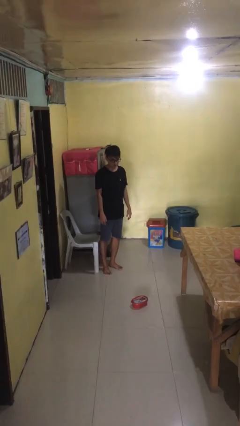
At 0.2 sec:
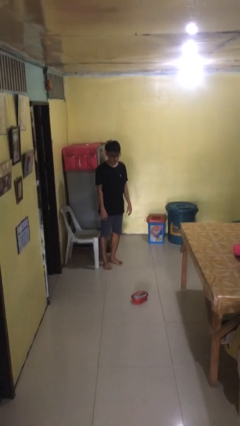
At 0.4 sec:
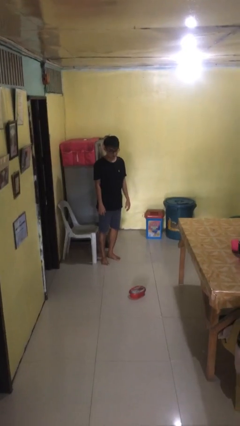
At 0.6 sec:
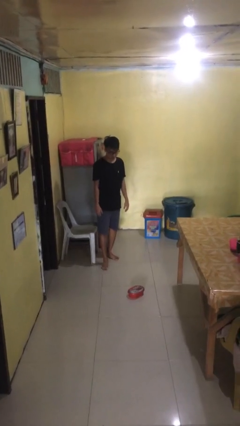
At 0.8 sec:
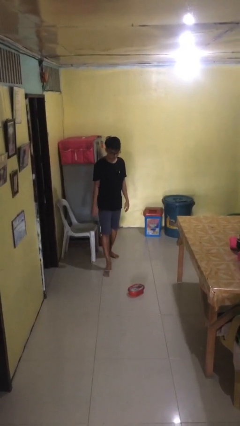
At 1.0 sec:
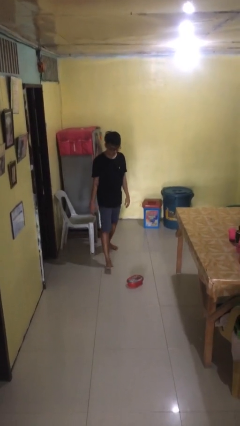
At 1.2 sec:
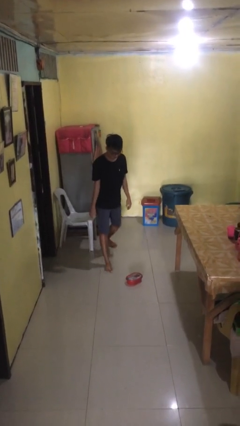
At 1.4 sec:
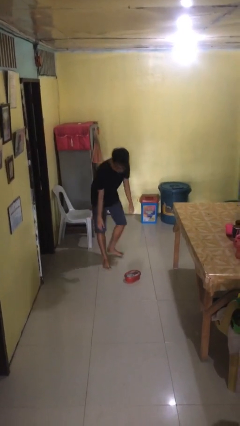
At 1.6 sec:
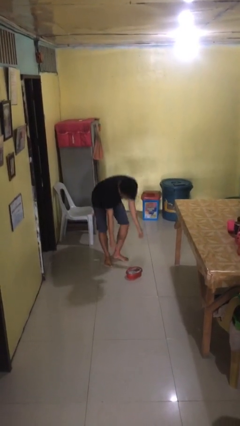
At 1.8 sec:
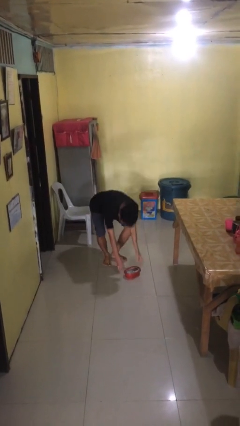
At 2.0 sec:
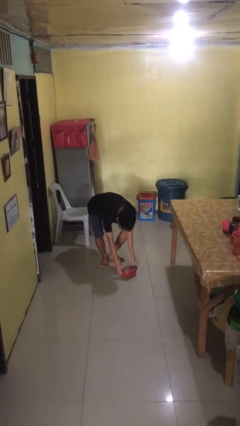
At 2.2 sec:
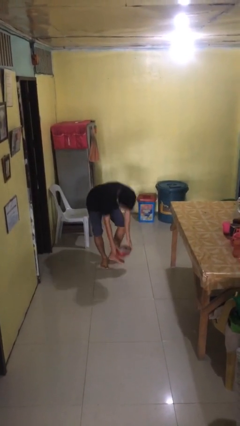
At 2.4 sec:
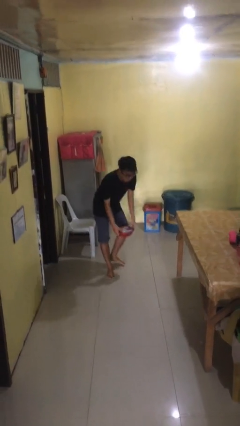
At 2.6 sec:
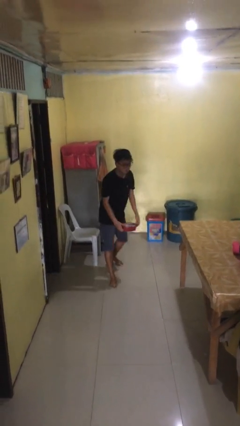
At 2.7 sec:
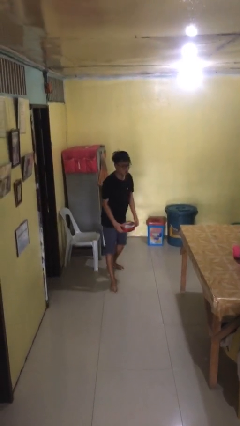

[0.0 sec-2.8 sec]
person picks up object from floor

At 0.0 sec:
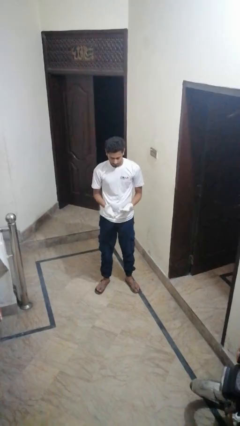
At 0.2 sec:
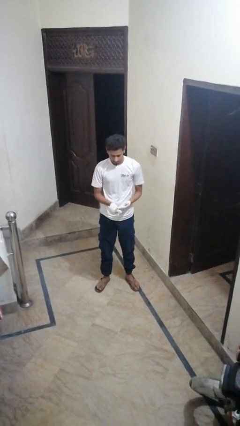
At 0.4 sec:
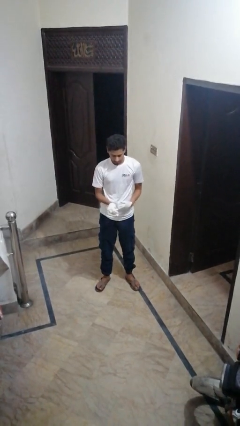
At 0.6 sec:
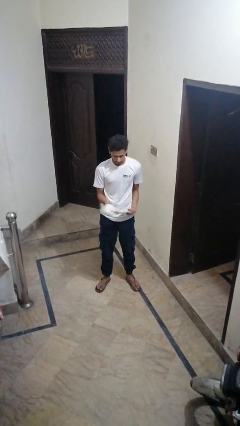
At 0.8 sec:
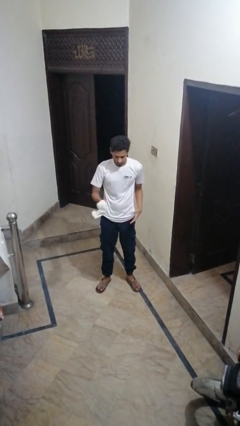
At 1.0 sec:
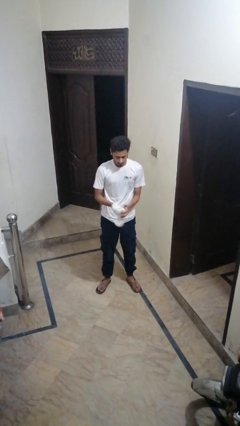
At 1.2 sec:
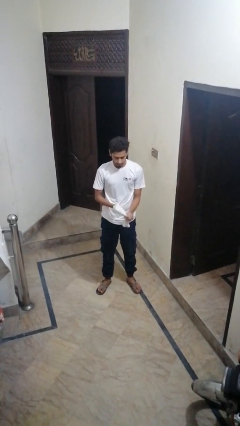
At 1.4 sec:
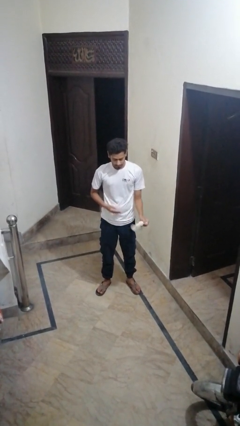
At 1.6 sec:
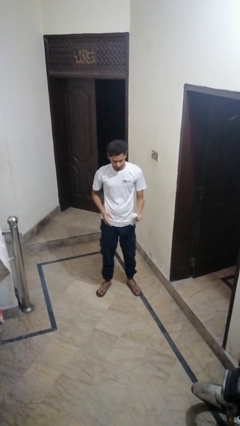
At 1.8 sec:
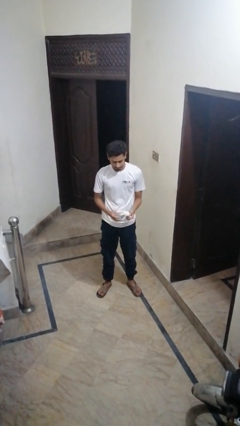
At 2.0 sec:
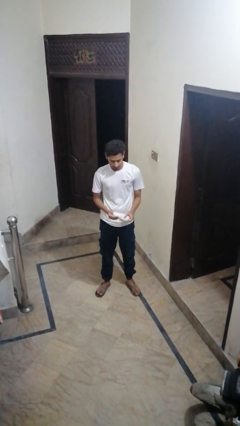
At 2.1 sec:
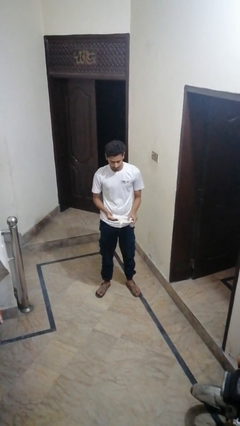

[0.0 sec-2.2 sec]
person takes off gloves

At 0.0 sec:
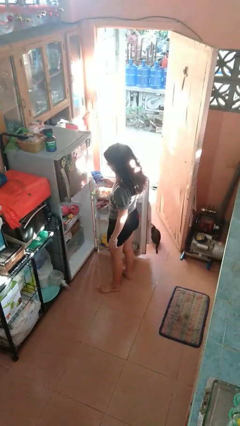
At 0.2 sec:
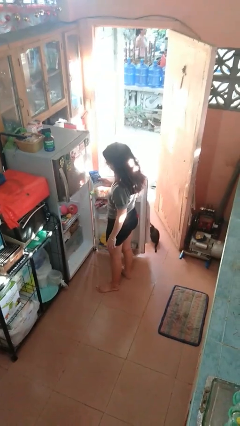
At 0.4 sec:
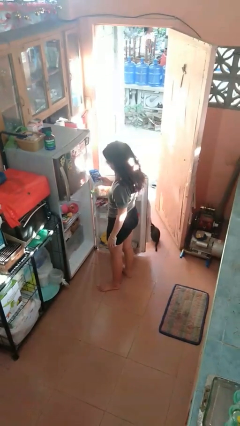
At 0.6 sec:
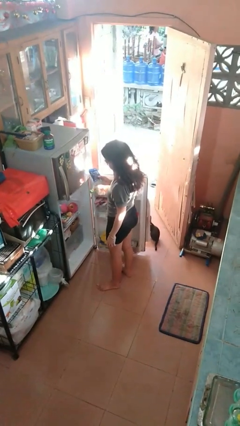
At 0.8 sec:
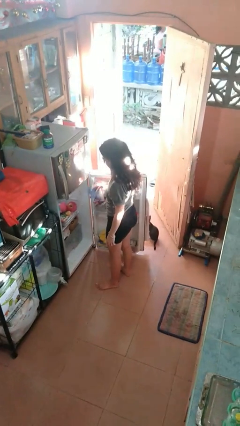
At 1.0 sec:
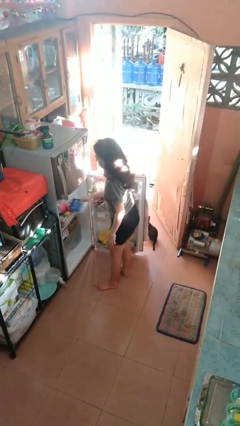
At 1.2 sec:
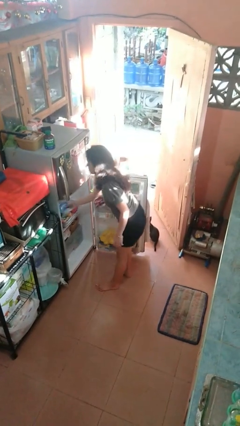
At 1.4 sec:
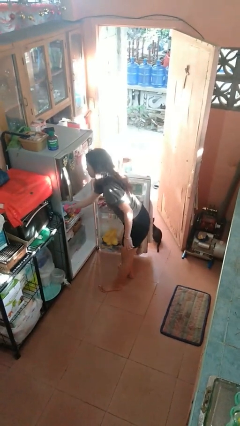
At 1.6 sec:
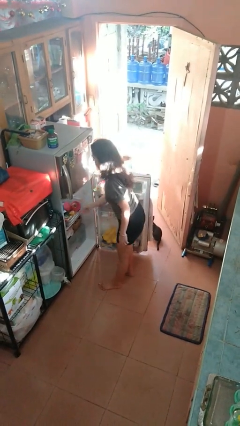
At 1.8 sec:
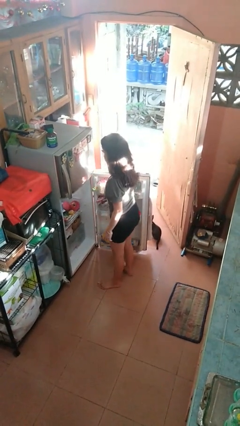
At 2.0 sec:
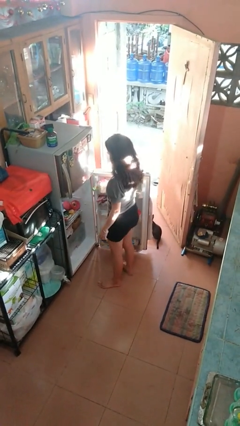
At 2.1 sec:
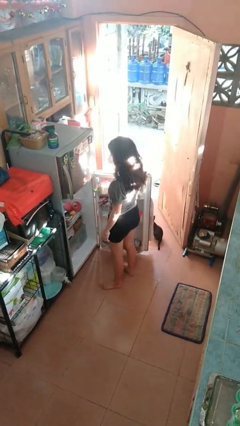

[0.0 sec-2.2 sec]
person puts object into refrigerator

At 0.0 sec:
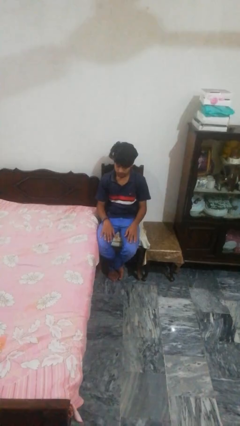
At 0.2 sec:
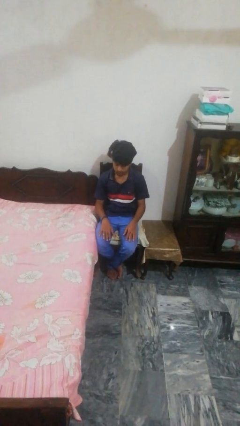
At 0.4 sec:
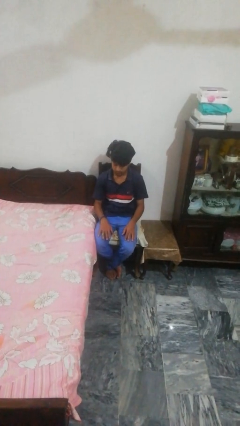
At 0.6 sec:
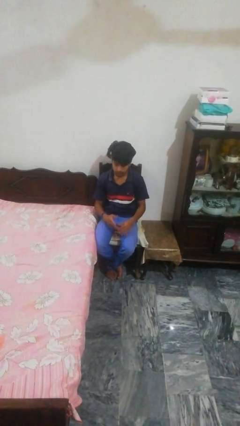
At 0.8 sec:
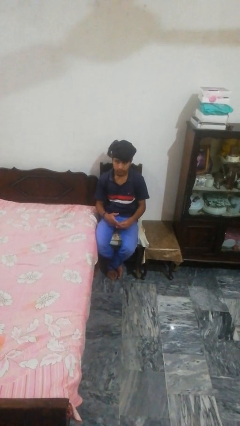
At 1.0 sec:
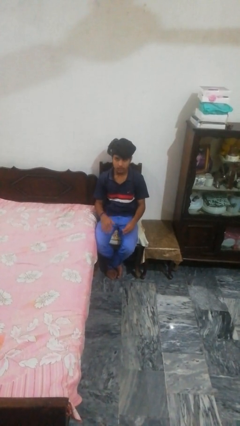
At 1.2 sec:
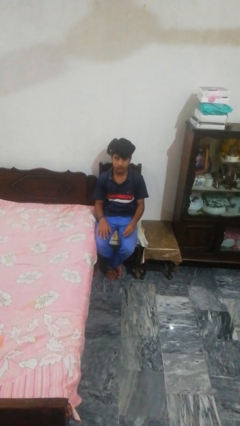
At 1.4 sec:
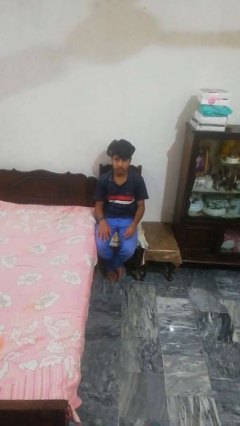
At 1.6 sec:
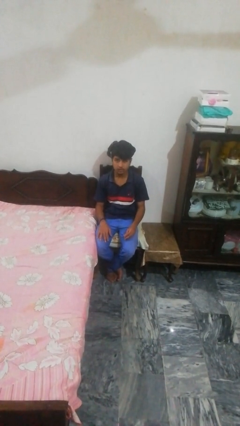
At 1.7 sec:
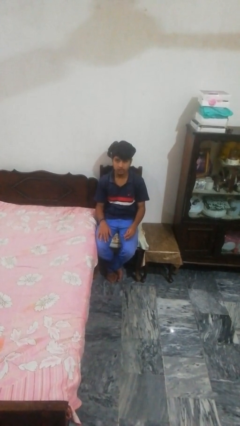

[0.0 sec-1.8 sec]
person takes off ring

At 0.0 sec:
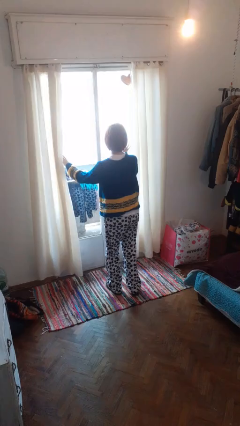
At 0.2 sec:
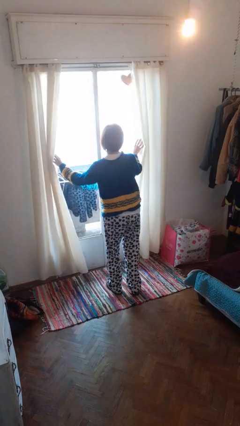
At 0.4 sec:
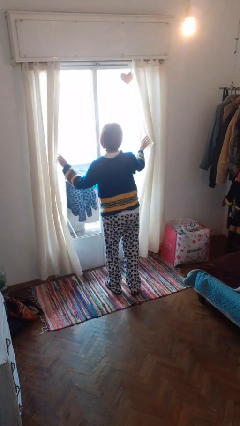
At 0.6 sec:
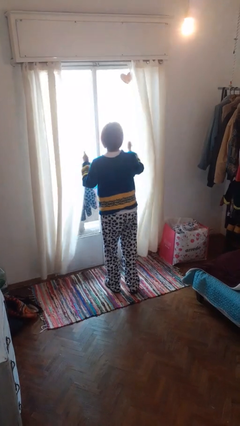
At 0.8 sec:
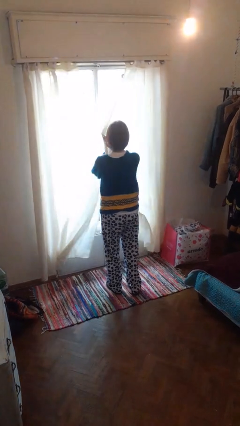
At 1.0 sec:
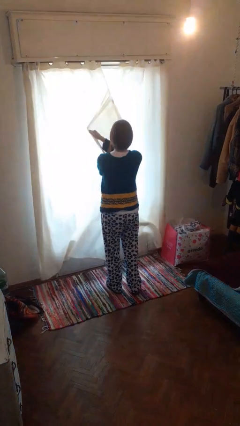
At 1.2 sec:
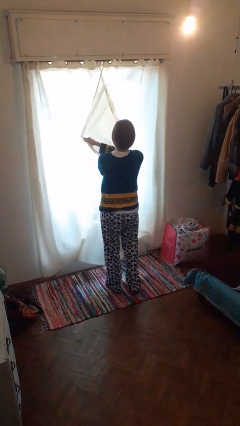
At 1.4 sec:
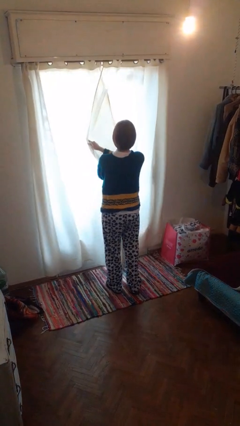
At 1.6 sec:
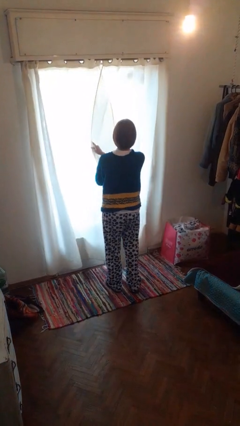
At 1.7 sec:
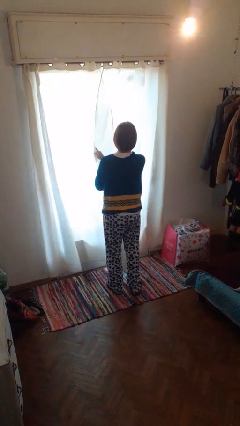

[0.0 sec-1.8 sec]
person closes curtains

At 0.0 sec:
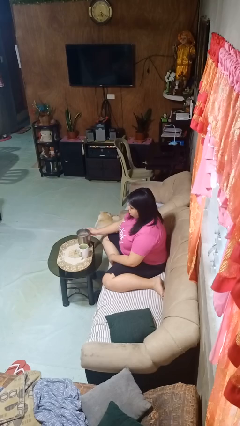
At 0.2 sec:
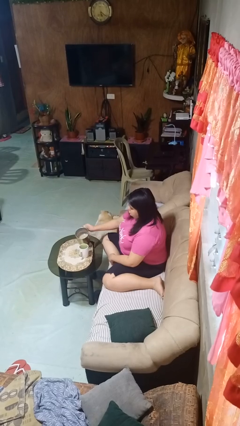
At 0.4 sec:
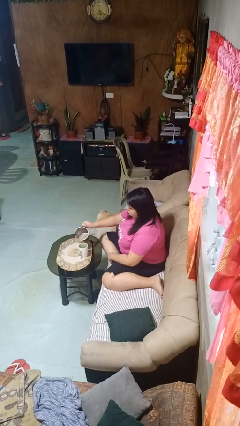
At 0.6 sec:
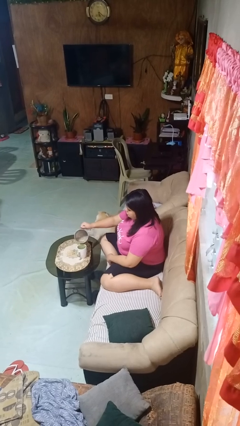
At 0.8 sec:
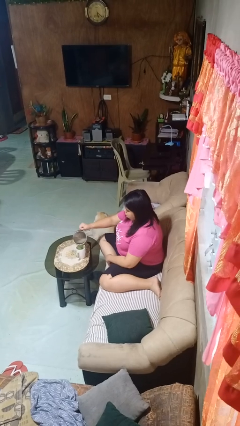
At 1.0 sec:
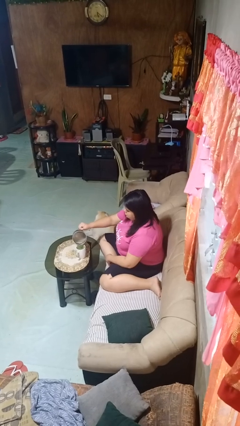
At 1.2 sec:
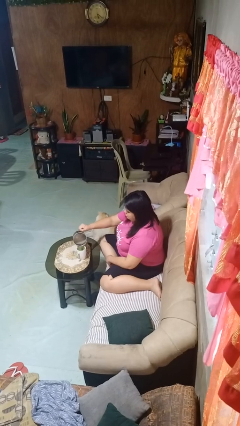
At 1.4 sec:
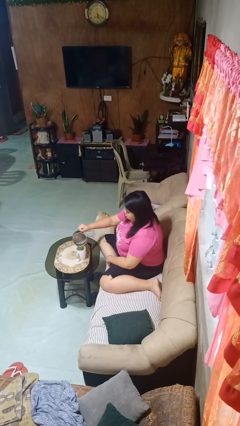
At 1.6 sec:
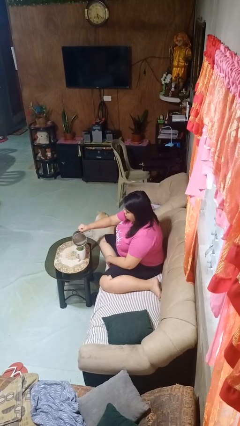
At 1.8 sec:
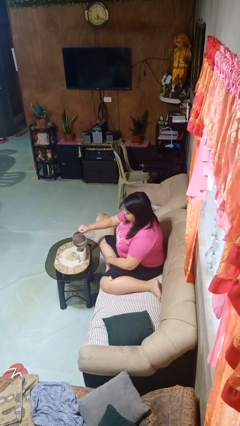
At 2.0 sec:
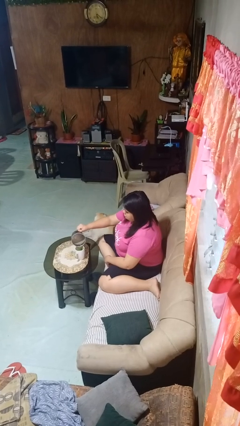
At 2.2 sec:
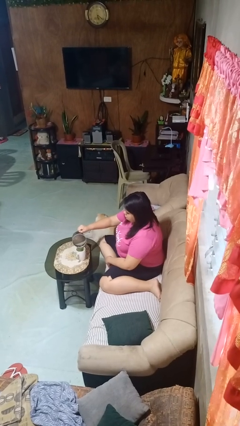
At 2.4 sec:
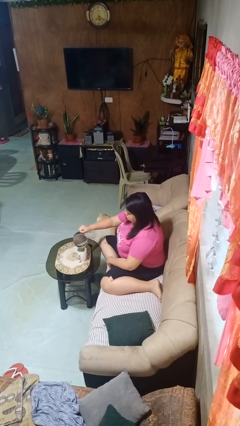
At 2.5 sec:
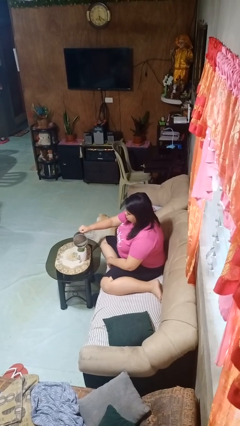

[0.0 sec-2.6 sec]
person pours coffee into mug

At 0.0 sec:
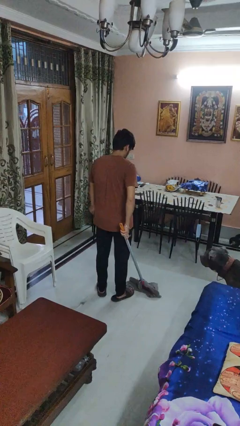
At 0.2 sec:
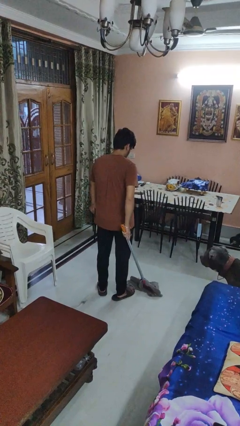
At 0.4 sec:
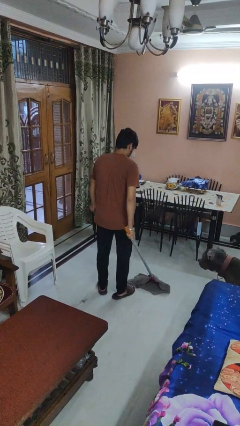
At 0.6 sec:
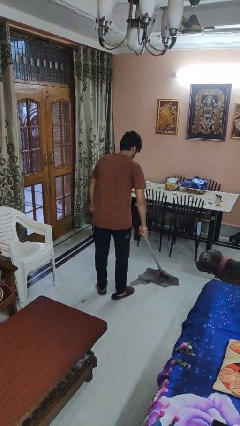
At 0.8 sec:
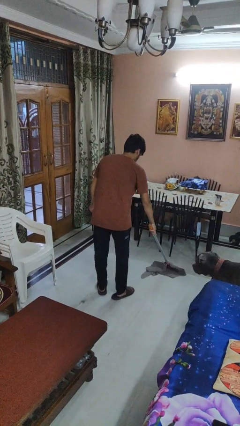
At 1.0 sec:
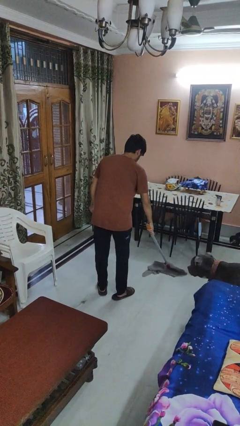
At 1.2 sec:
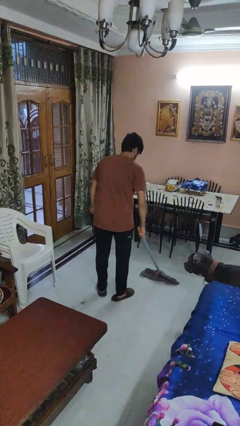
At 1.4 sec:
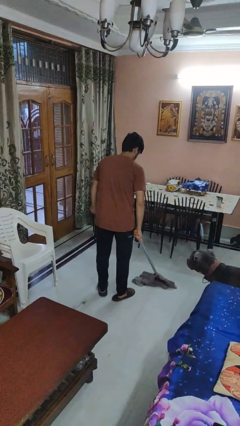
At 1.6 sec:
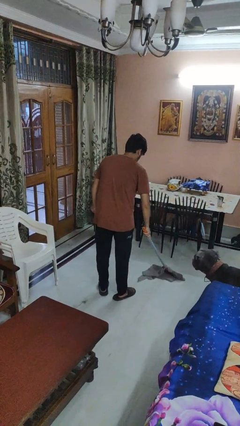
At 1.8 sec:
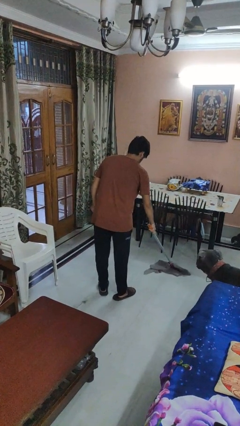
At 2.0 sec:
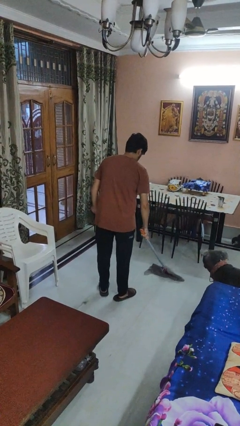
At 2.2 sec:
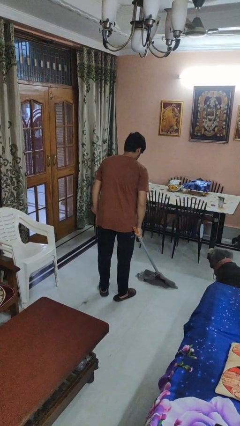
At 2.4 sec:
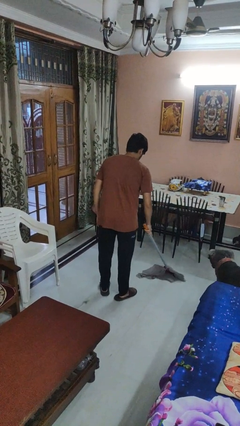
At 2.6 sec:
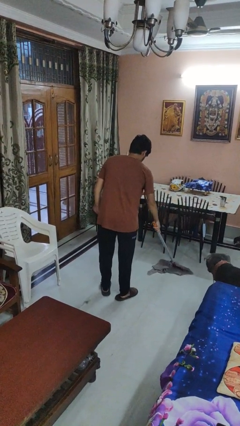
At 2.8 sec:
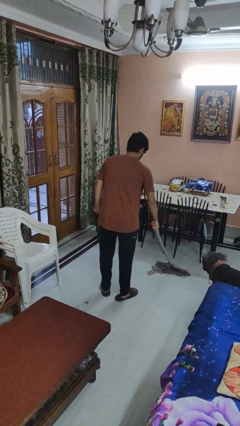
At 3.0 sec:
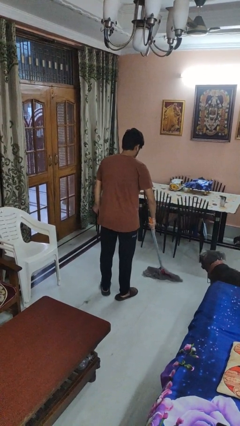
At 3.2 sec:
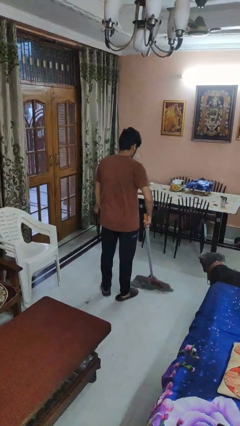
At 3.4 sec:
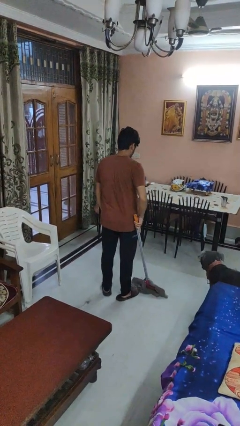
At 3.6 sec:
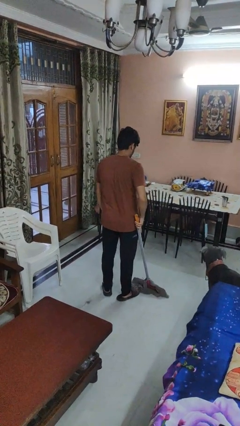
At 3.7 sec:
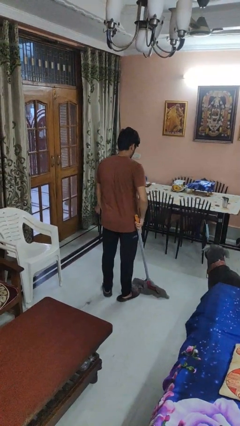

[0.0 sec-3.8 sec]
person mops
